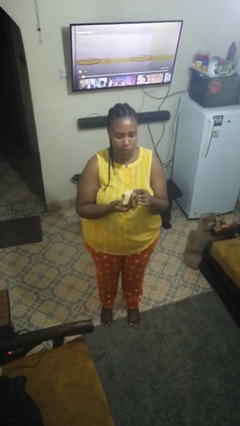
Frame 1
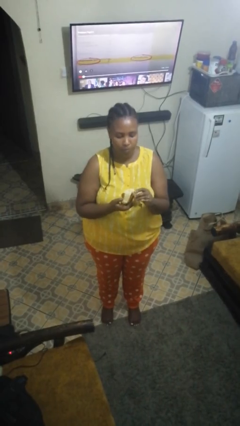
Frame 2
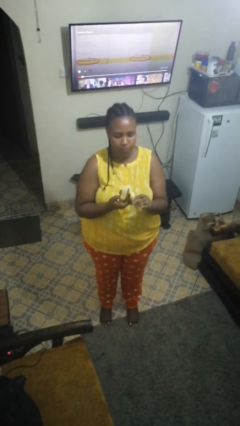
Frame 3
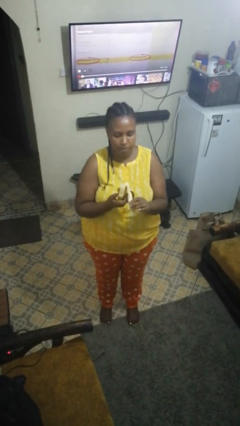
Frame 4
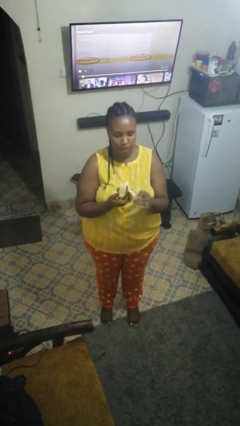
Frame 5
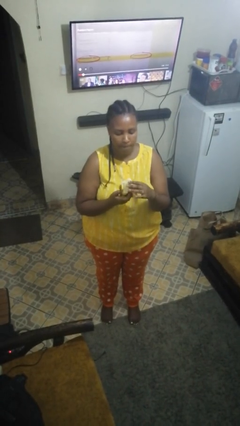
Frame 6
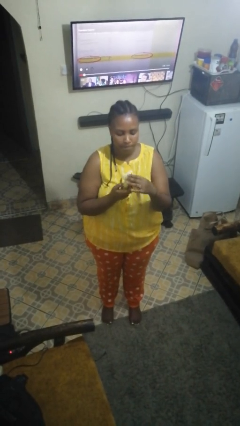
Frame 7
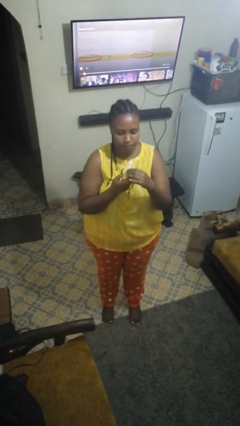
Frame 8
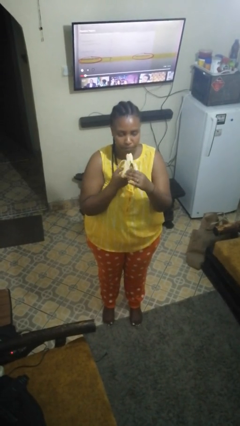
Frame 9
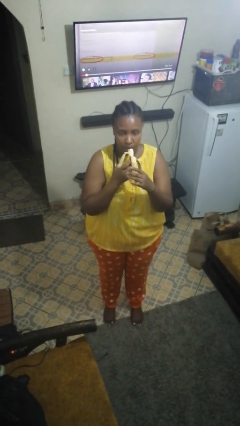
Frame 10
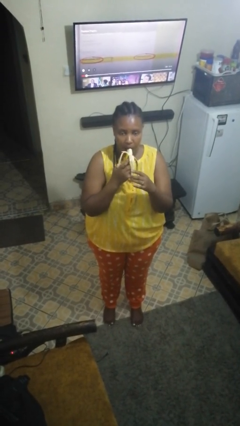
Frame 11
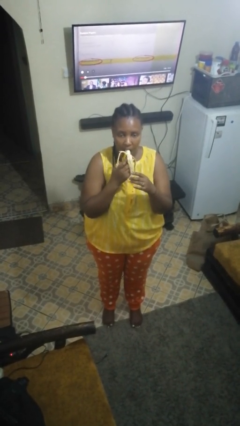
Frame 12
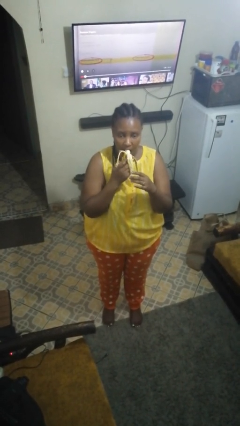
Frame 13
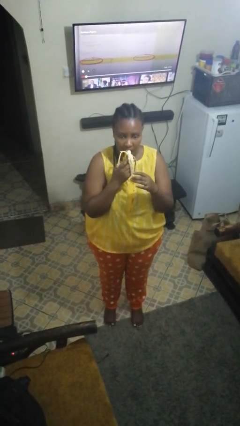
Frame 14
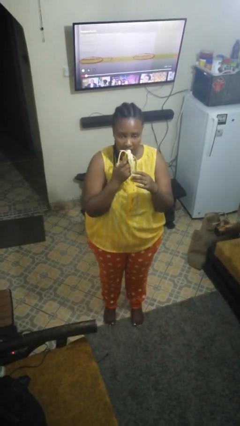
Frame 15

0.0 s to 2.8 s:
person eats banana

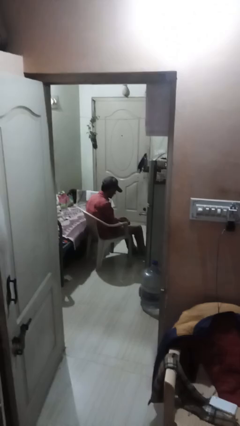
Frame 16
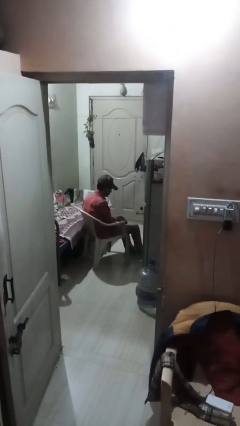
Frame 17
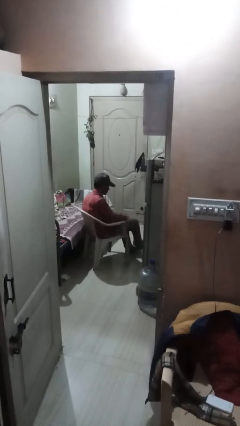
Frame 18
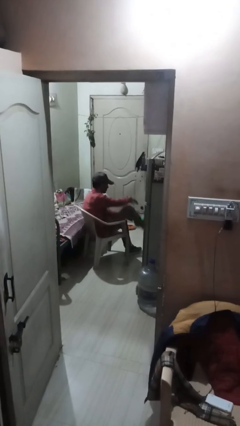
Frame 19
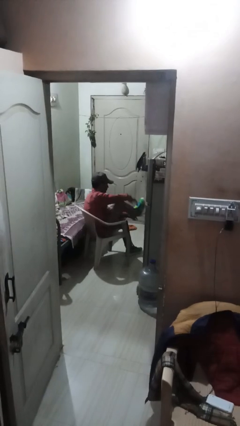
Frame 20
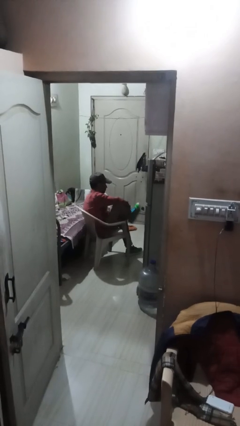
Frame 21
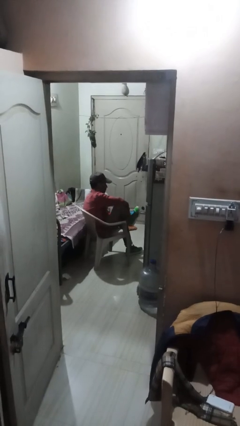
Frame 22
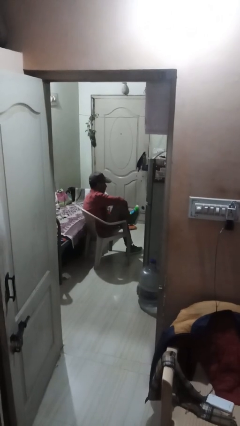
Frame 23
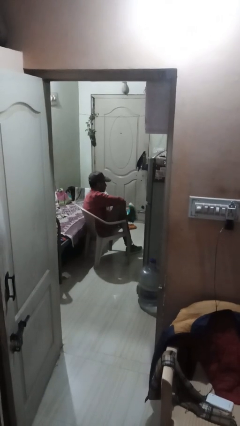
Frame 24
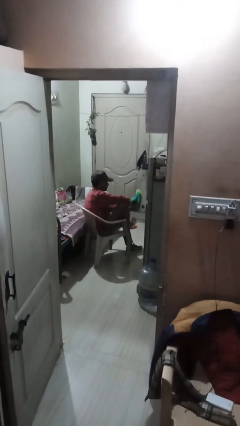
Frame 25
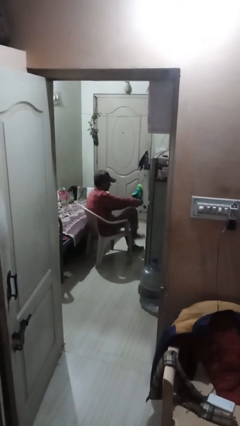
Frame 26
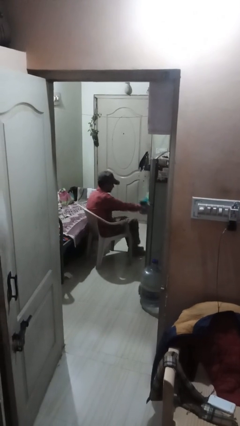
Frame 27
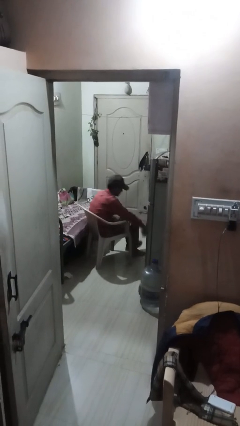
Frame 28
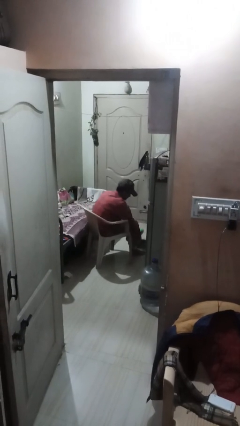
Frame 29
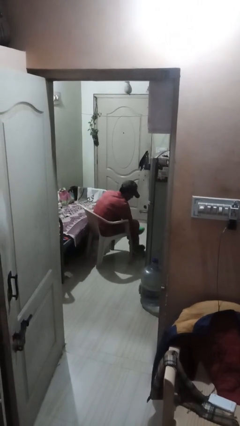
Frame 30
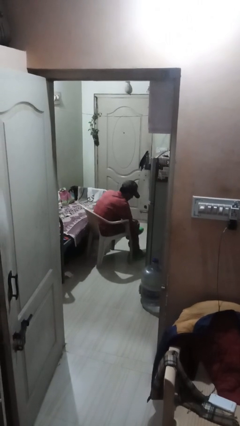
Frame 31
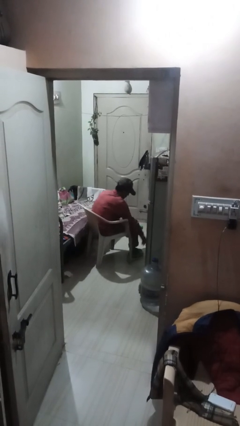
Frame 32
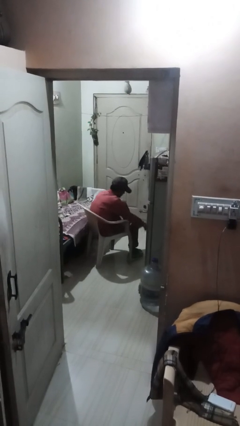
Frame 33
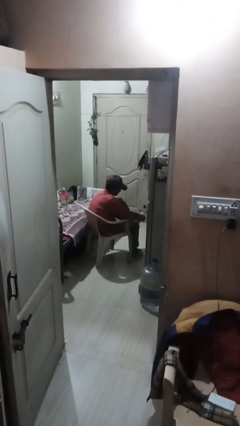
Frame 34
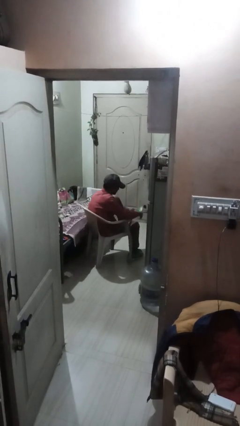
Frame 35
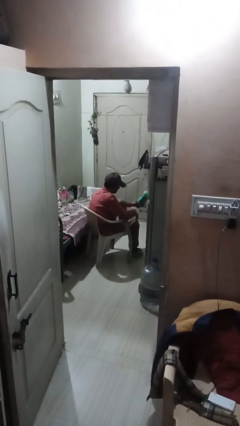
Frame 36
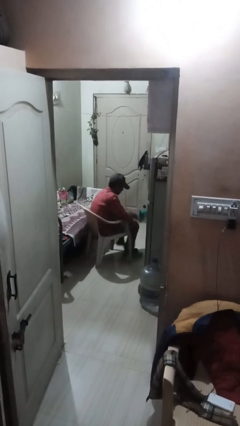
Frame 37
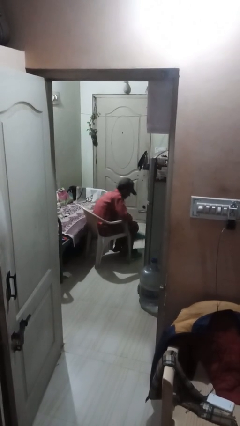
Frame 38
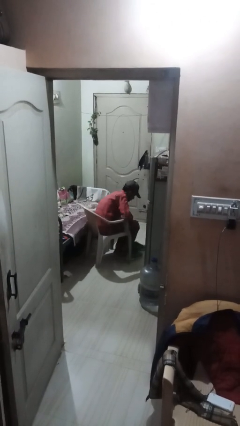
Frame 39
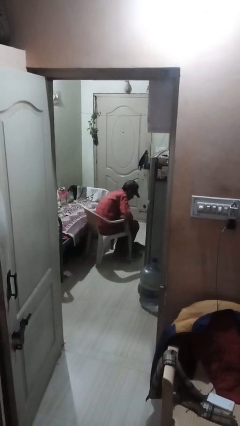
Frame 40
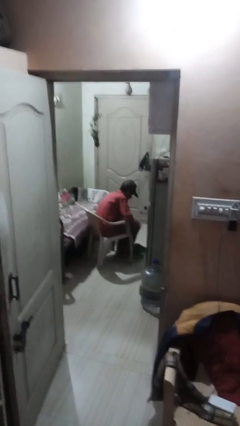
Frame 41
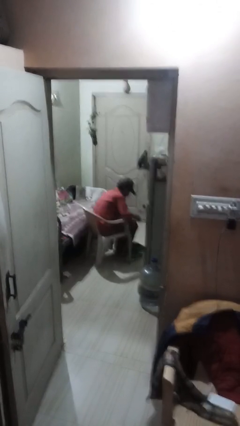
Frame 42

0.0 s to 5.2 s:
person takes off shoes

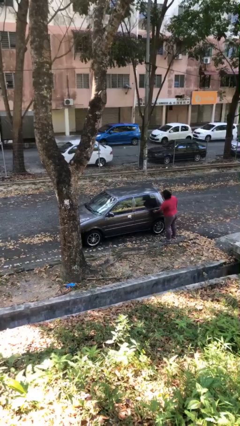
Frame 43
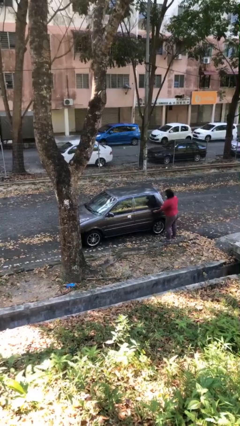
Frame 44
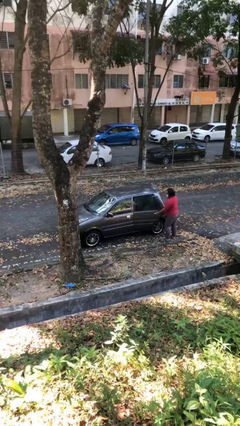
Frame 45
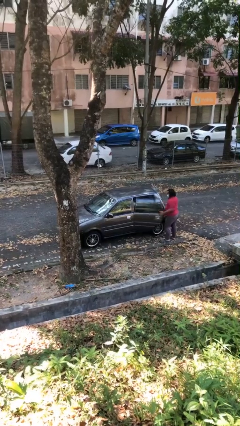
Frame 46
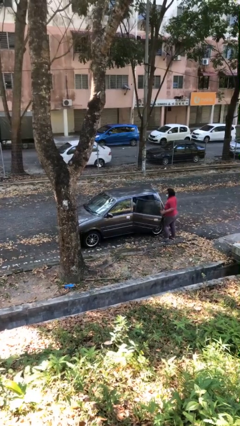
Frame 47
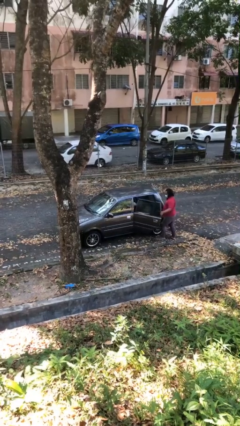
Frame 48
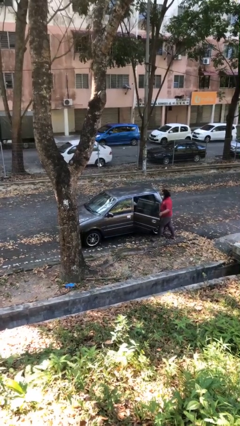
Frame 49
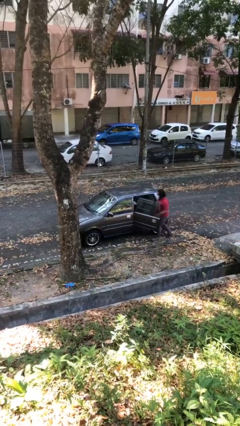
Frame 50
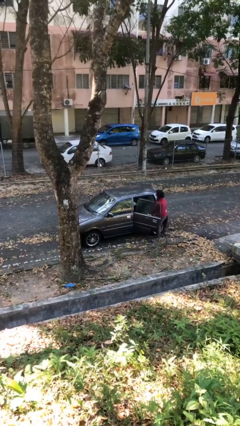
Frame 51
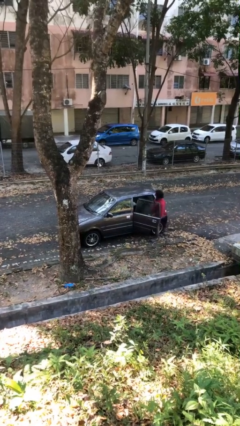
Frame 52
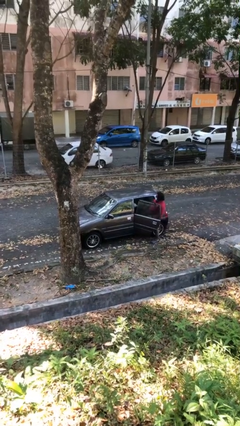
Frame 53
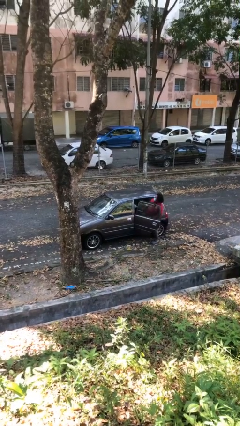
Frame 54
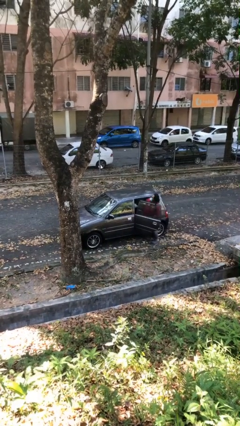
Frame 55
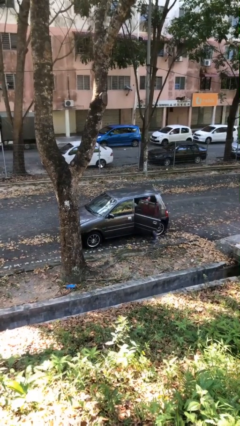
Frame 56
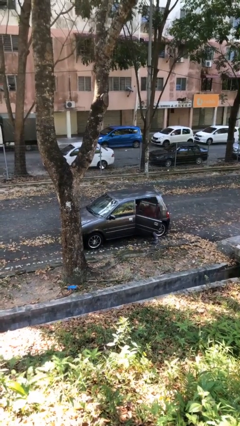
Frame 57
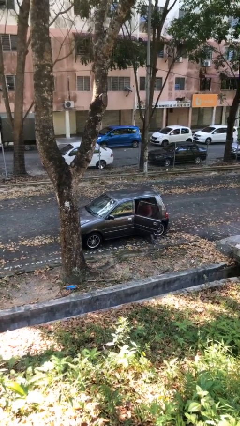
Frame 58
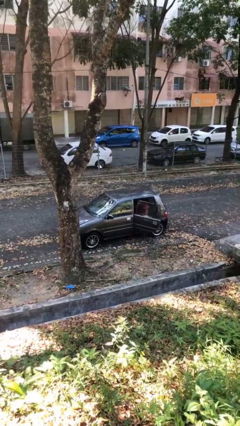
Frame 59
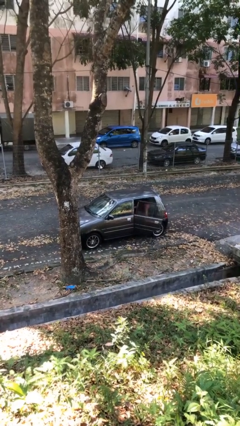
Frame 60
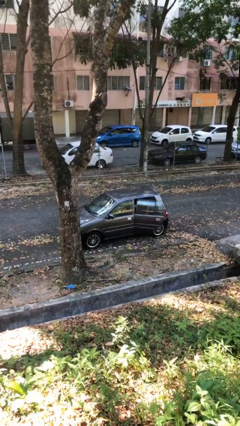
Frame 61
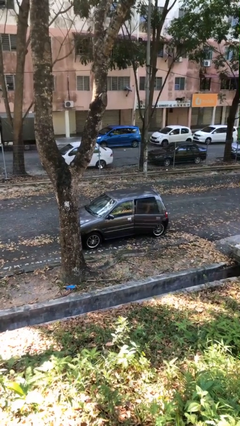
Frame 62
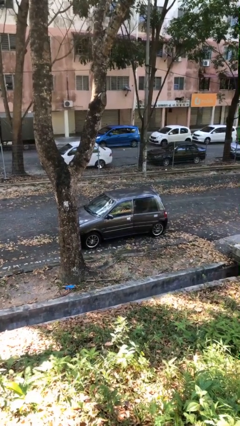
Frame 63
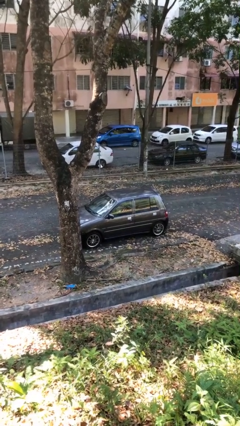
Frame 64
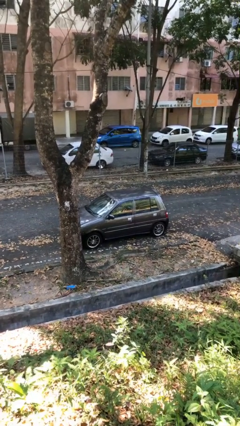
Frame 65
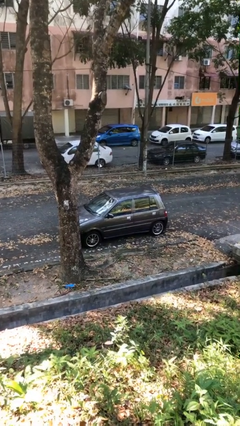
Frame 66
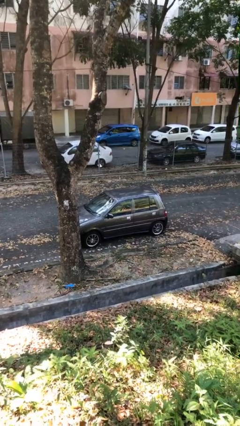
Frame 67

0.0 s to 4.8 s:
car picks up person

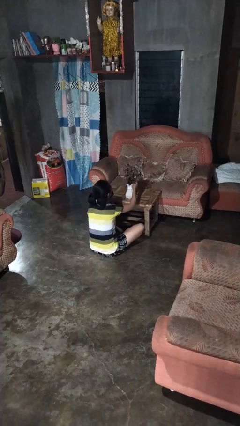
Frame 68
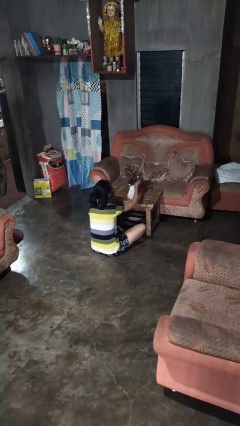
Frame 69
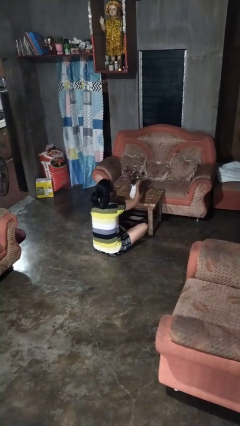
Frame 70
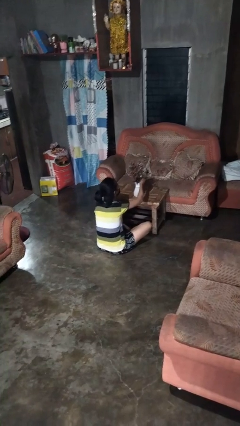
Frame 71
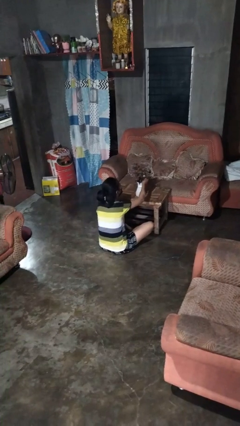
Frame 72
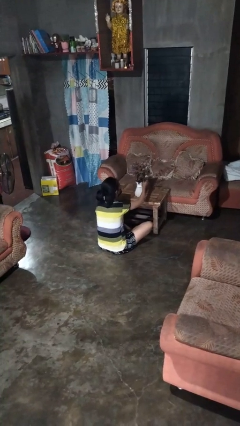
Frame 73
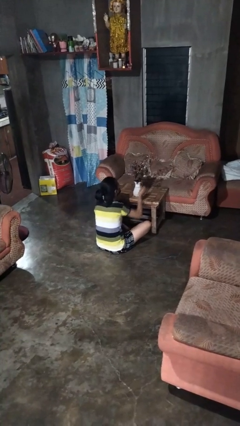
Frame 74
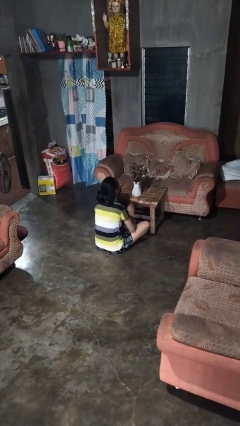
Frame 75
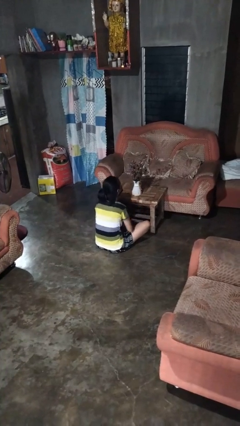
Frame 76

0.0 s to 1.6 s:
person arranges flowers in vase

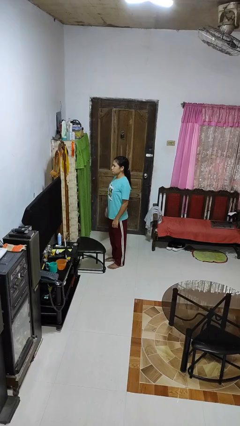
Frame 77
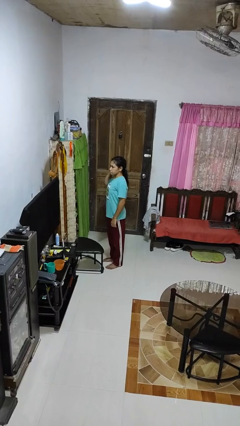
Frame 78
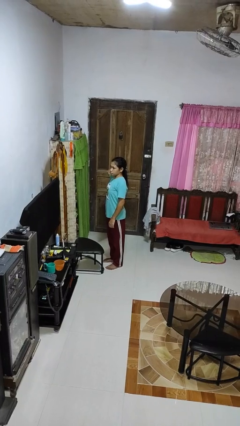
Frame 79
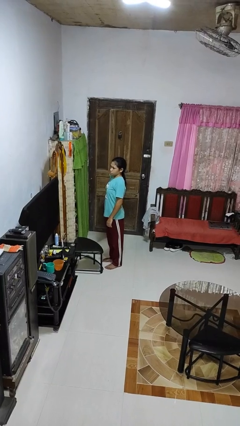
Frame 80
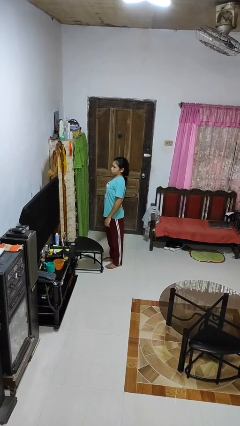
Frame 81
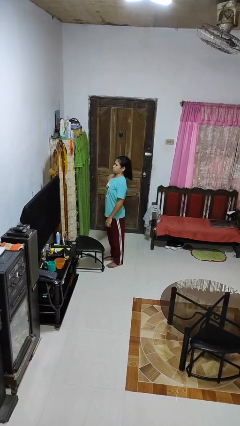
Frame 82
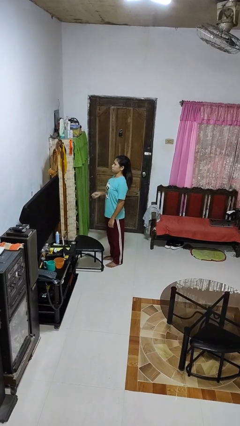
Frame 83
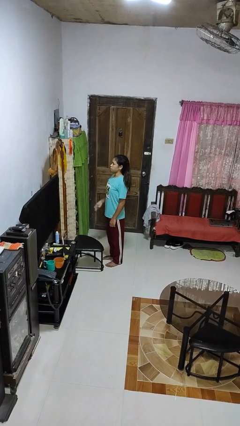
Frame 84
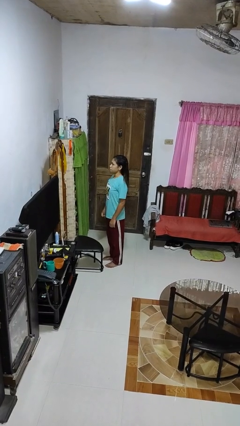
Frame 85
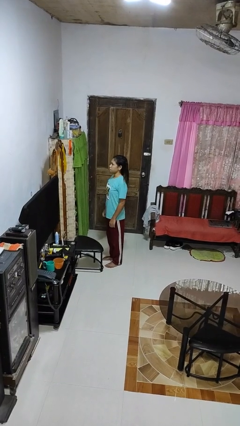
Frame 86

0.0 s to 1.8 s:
person takes off hairtie

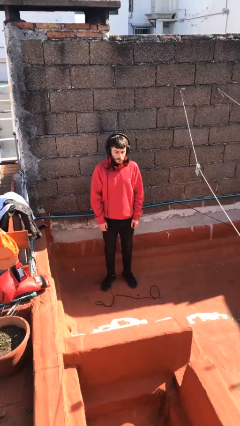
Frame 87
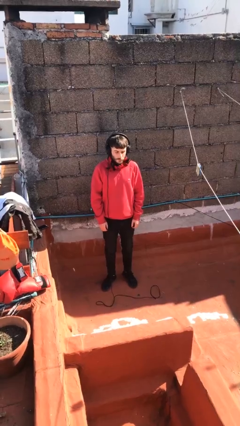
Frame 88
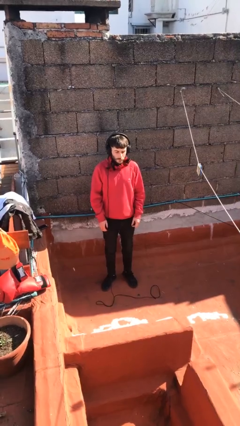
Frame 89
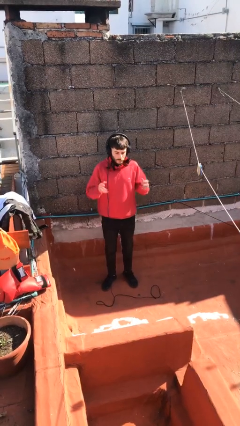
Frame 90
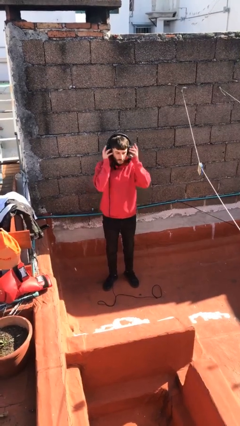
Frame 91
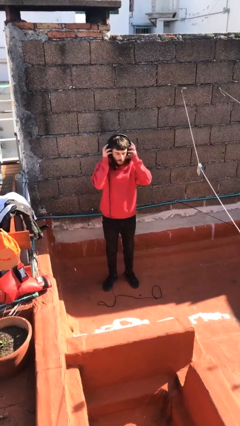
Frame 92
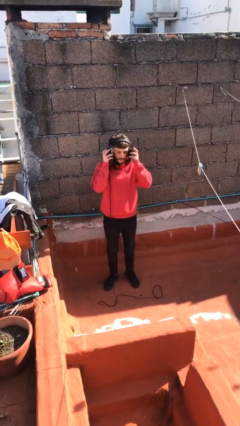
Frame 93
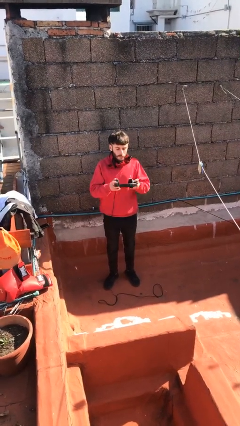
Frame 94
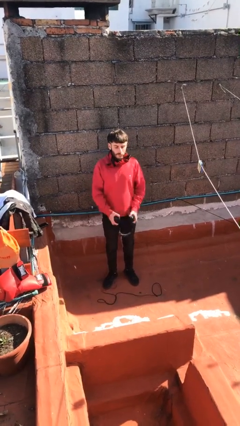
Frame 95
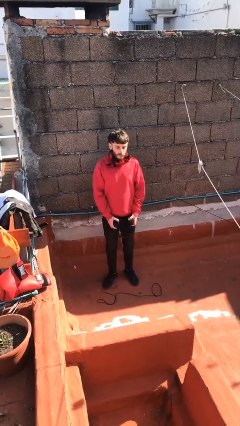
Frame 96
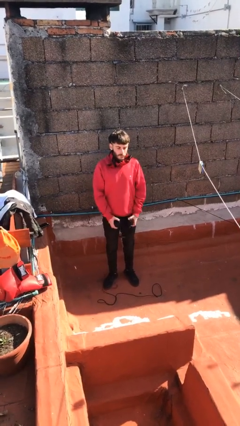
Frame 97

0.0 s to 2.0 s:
person takes off headphones
